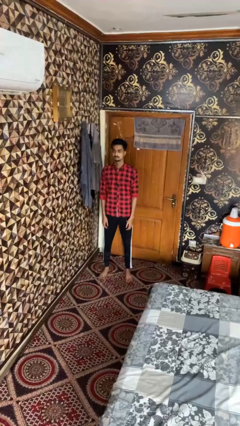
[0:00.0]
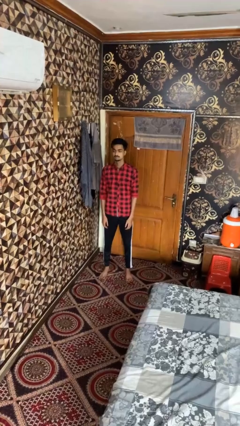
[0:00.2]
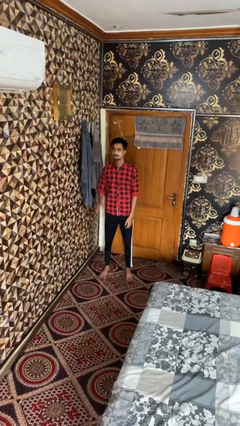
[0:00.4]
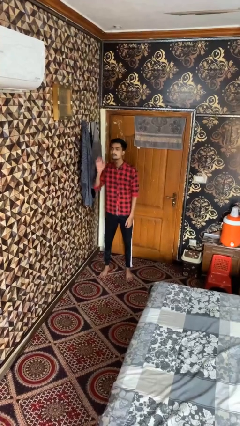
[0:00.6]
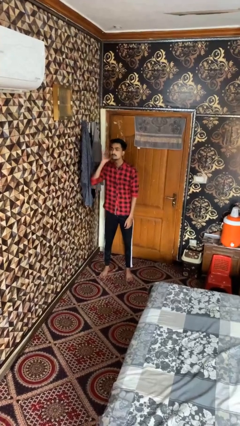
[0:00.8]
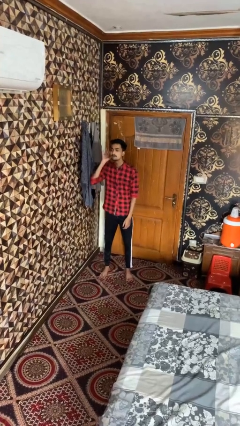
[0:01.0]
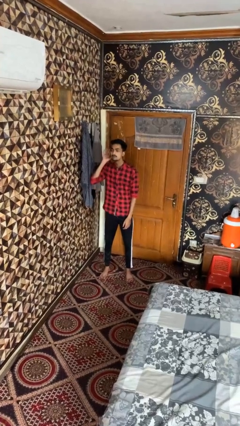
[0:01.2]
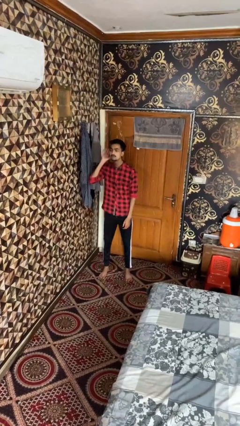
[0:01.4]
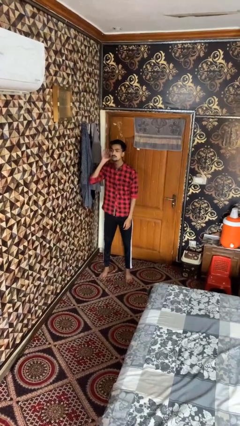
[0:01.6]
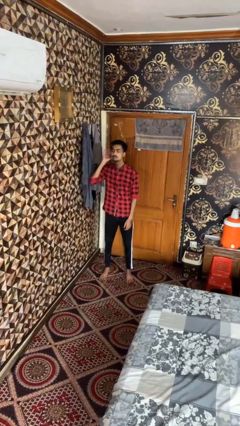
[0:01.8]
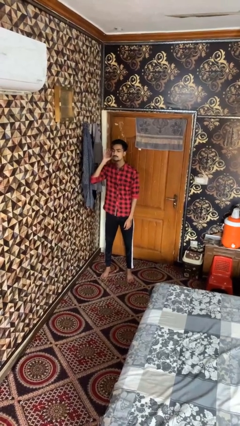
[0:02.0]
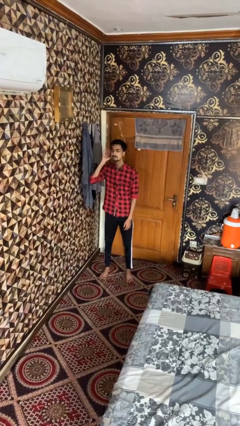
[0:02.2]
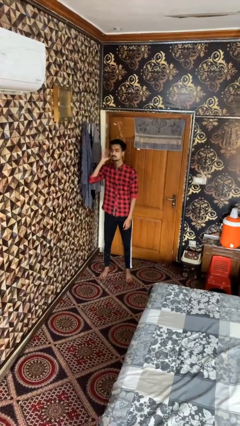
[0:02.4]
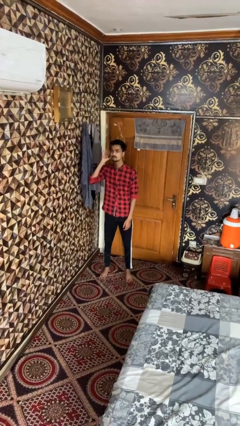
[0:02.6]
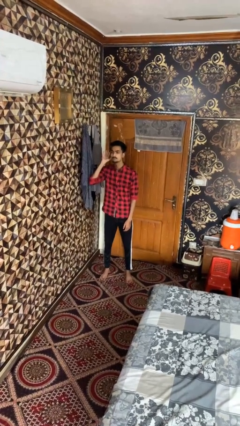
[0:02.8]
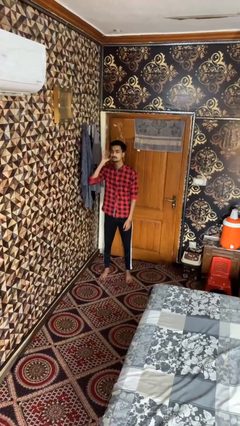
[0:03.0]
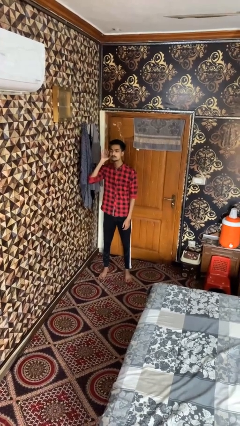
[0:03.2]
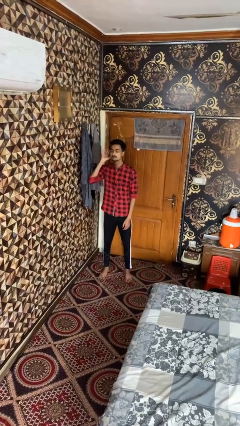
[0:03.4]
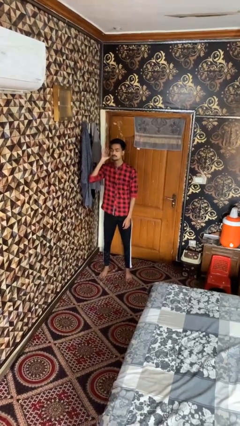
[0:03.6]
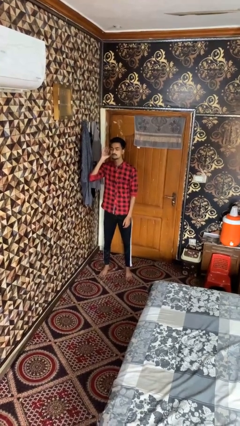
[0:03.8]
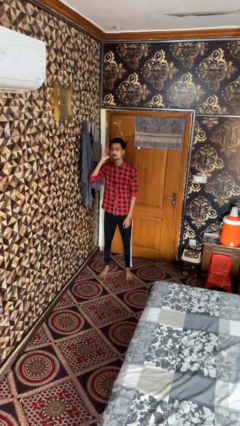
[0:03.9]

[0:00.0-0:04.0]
person gestures listen closely

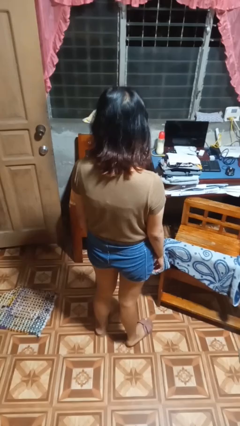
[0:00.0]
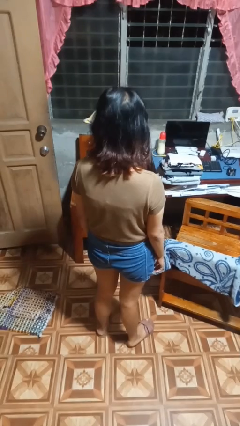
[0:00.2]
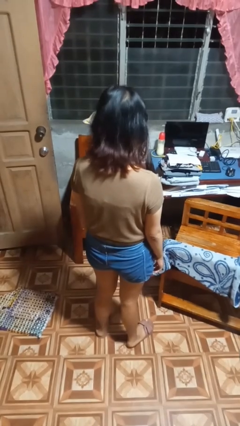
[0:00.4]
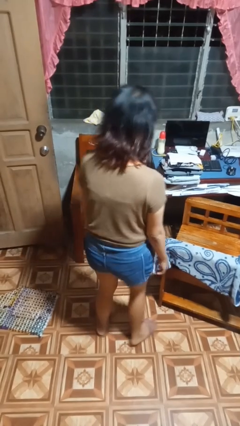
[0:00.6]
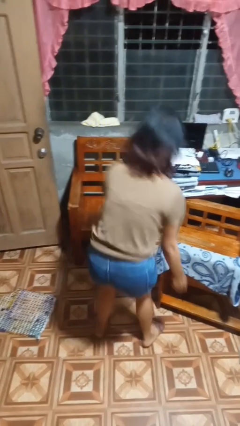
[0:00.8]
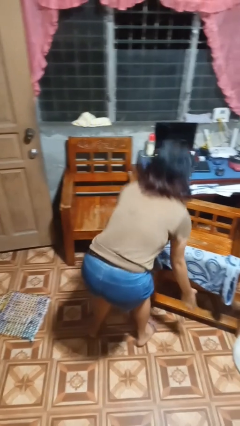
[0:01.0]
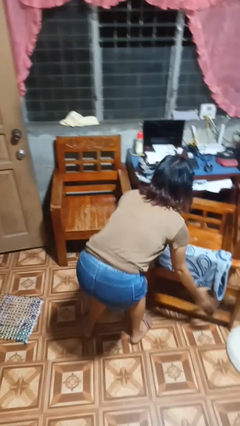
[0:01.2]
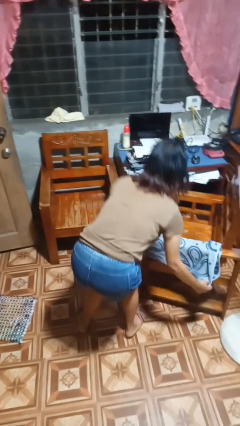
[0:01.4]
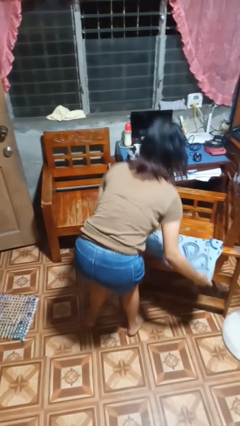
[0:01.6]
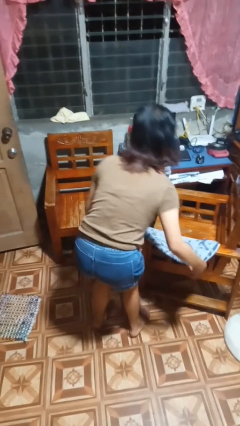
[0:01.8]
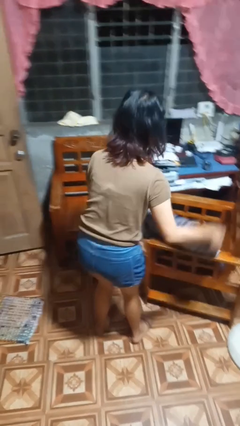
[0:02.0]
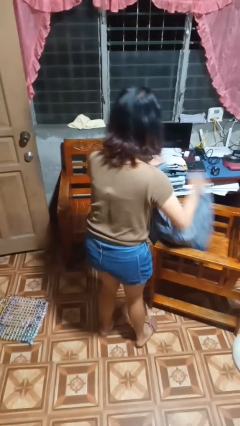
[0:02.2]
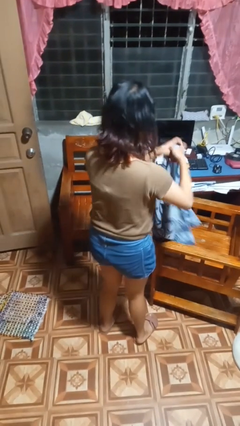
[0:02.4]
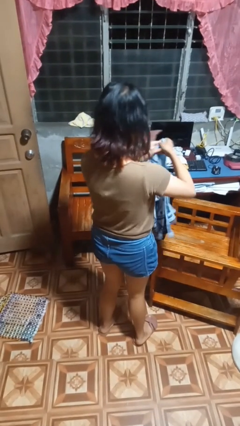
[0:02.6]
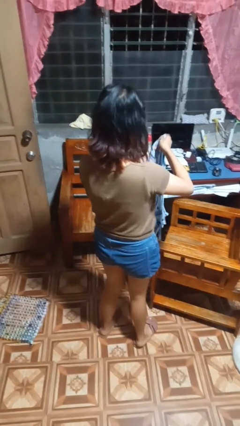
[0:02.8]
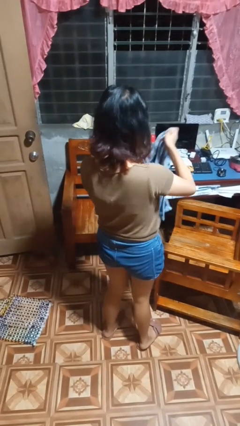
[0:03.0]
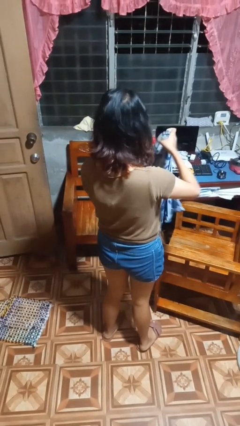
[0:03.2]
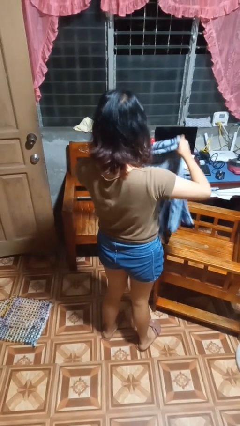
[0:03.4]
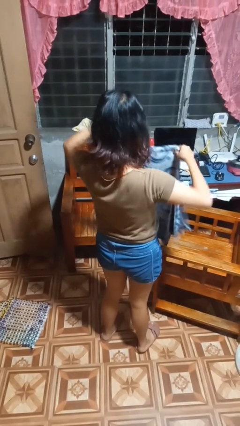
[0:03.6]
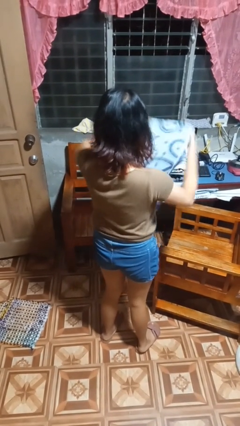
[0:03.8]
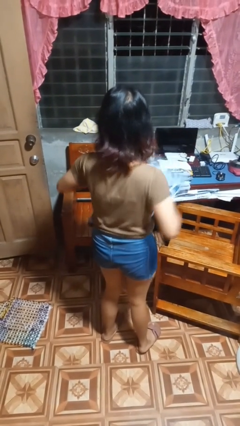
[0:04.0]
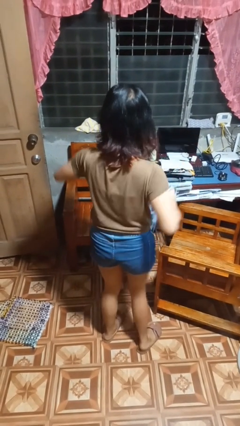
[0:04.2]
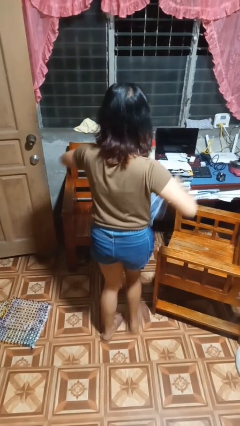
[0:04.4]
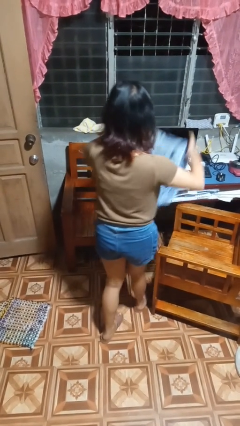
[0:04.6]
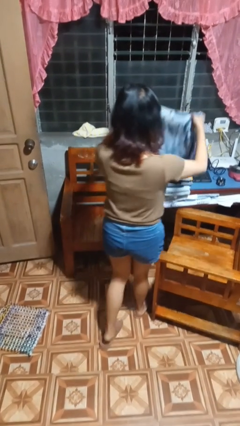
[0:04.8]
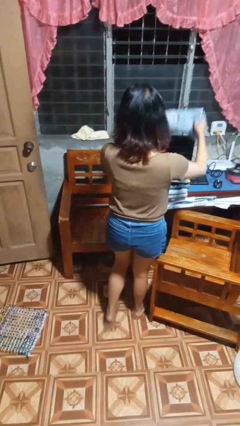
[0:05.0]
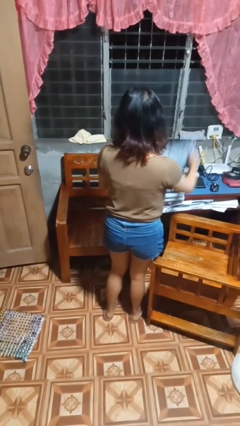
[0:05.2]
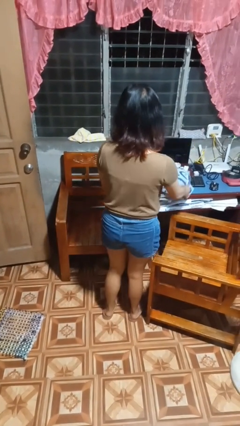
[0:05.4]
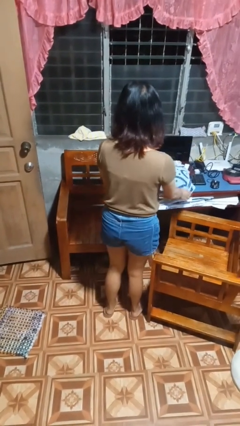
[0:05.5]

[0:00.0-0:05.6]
person folds towel

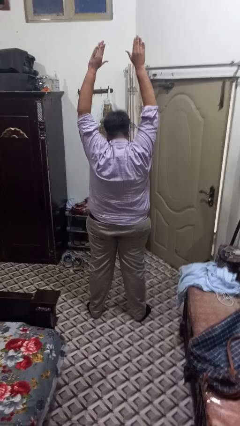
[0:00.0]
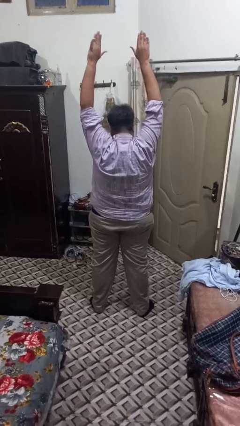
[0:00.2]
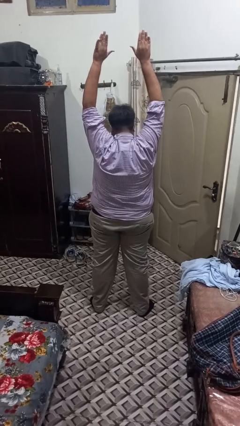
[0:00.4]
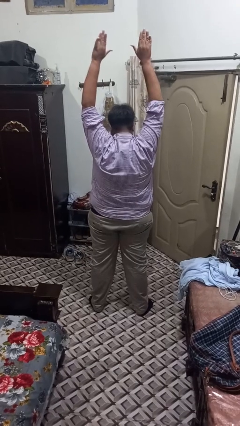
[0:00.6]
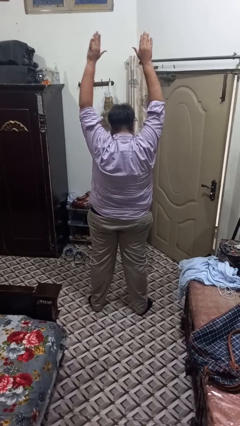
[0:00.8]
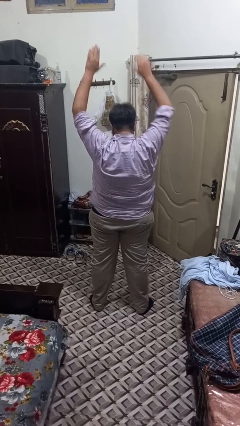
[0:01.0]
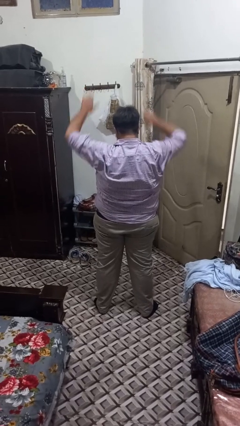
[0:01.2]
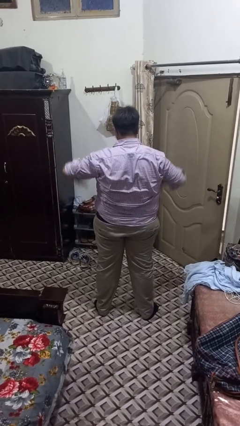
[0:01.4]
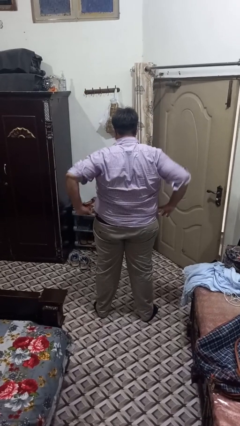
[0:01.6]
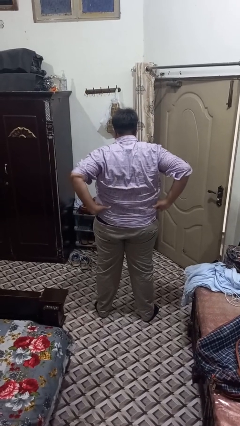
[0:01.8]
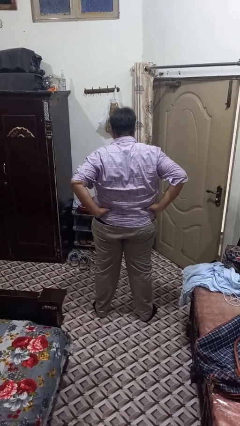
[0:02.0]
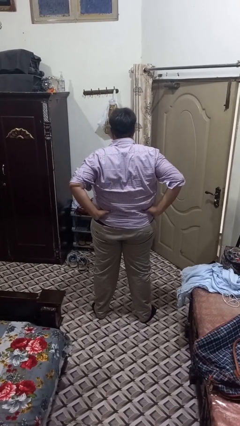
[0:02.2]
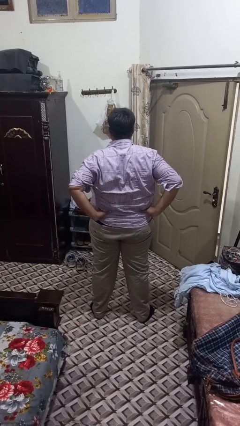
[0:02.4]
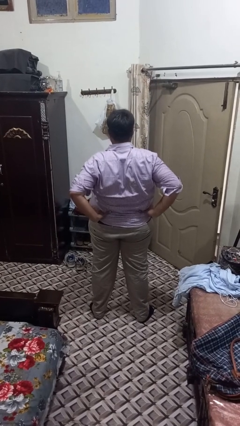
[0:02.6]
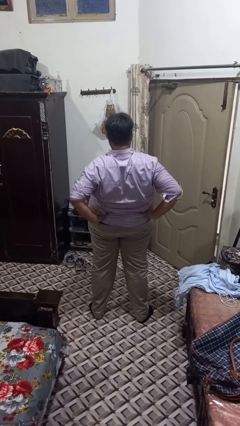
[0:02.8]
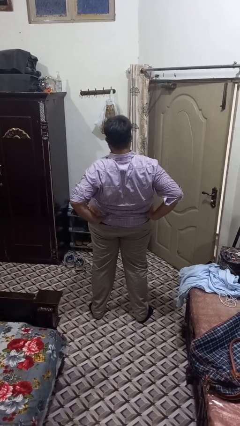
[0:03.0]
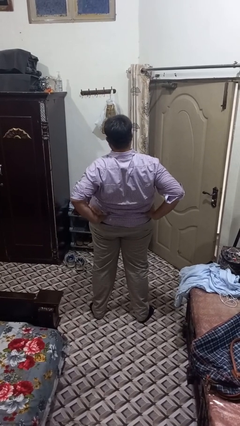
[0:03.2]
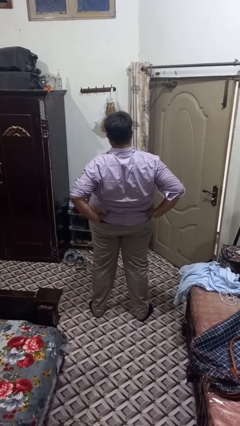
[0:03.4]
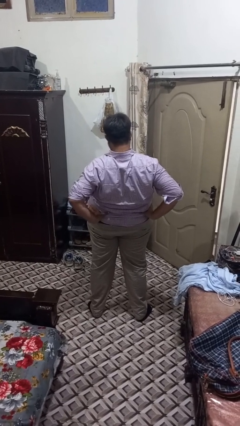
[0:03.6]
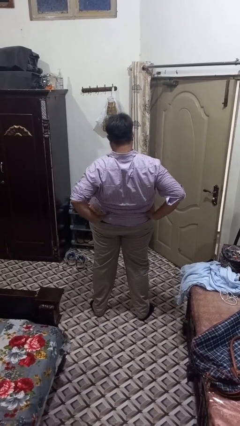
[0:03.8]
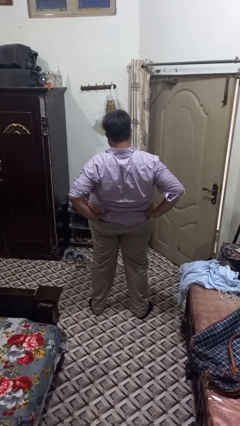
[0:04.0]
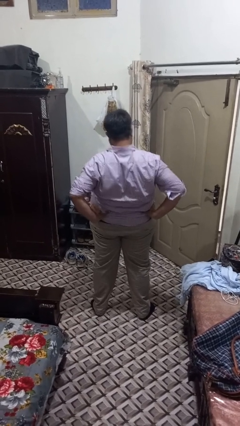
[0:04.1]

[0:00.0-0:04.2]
person stretches back

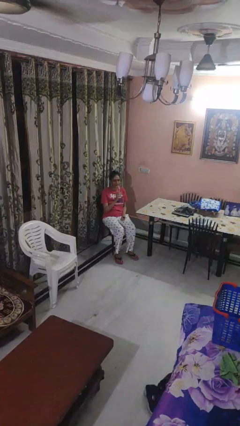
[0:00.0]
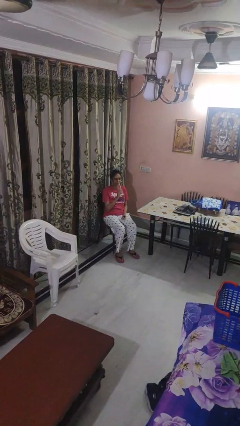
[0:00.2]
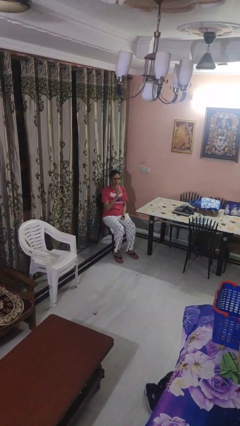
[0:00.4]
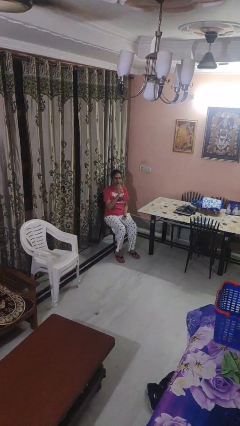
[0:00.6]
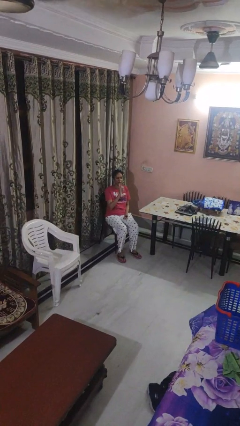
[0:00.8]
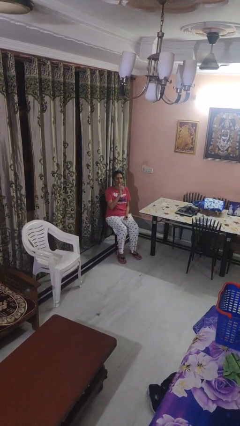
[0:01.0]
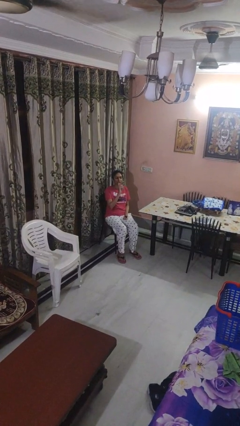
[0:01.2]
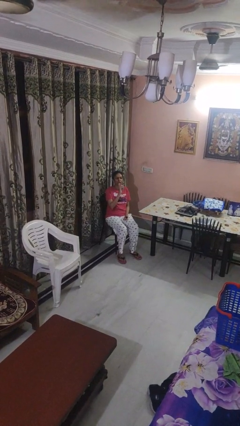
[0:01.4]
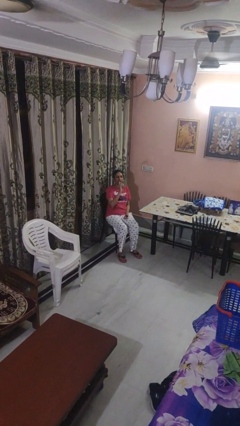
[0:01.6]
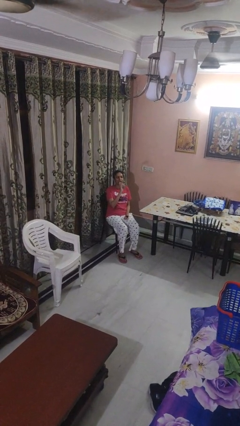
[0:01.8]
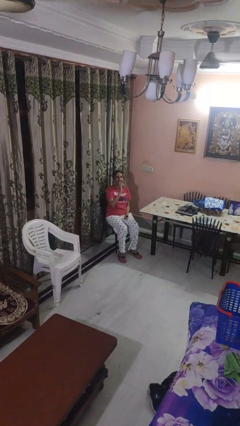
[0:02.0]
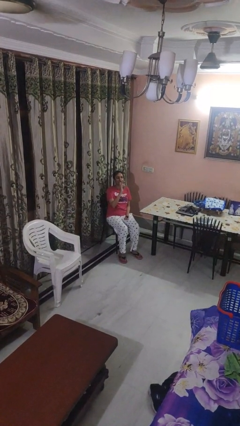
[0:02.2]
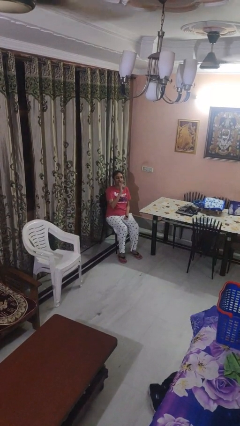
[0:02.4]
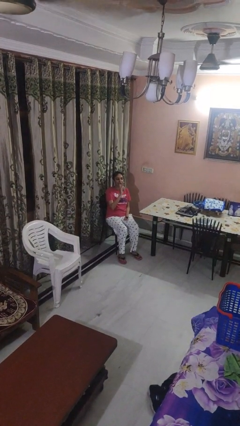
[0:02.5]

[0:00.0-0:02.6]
person drinks from bottle

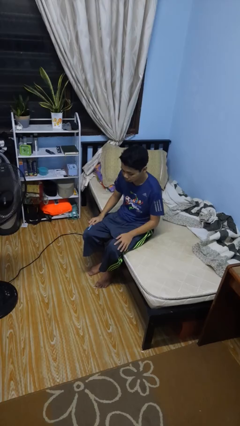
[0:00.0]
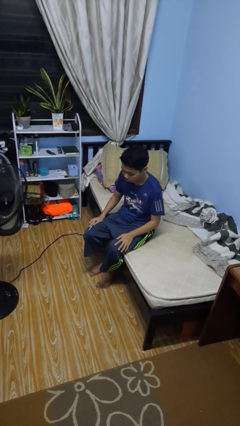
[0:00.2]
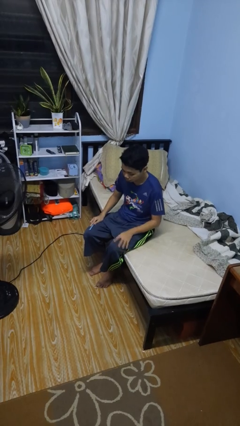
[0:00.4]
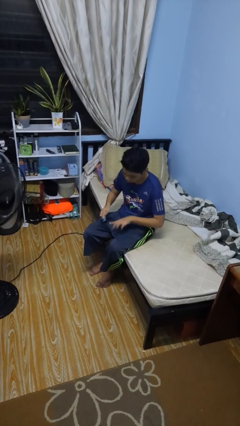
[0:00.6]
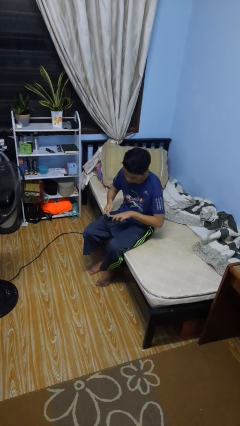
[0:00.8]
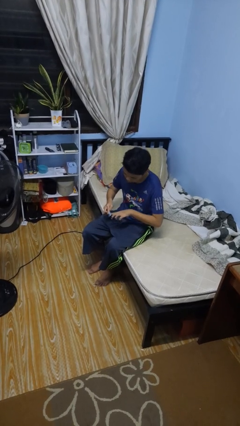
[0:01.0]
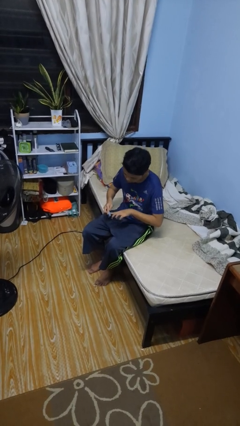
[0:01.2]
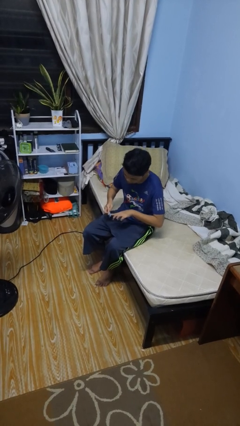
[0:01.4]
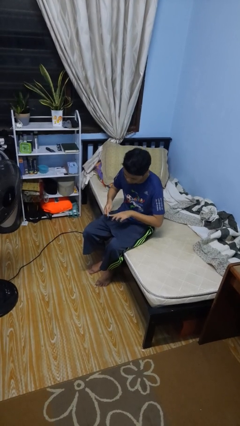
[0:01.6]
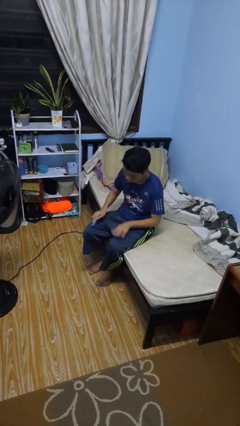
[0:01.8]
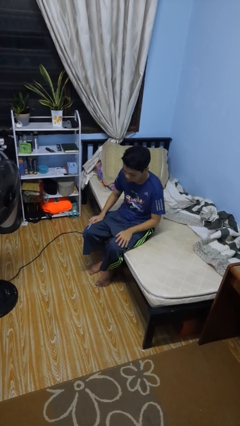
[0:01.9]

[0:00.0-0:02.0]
person files fingernails
